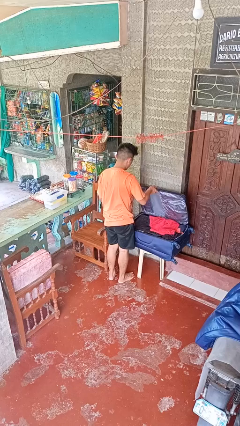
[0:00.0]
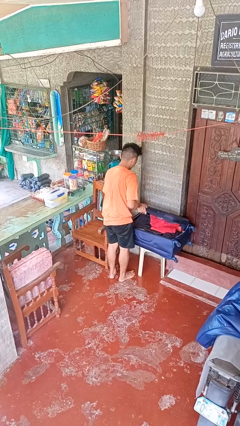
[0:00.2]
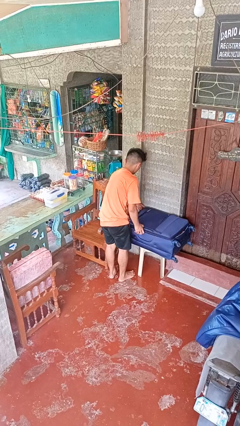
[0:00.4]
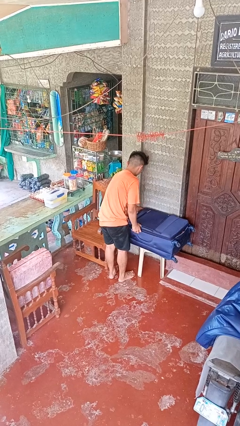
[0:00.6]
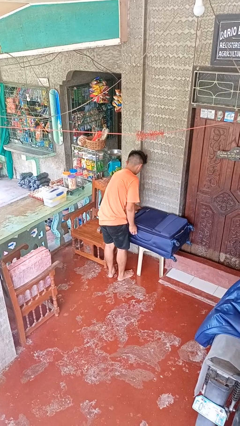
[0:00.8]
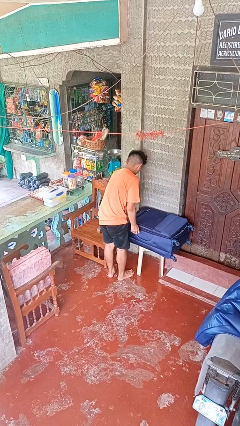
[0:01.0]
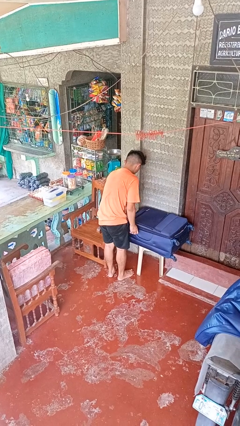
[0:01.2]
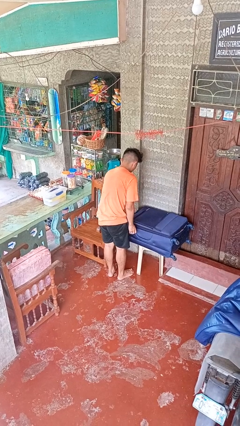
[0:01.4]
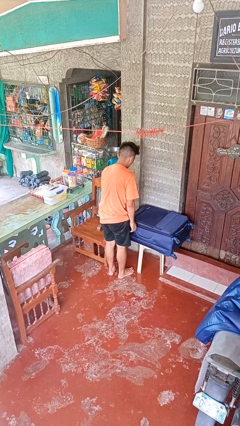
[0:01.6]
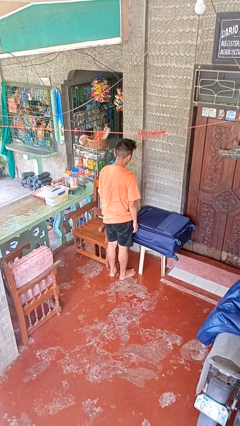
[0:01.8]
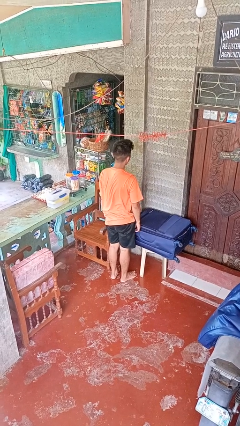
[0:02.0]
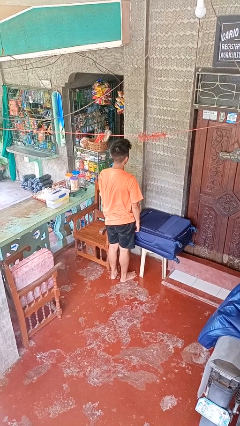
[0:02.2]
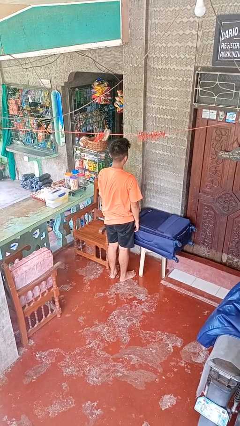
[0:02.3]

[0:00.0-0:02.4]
person closes suitcase

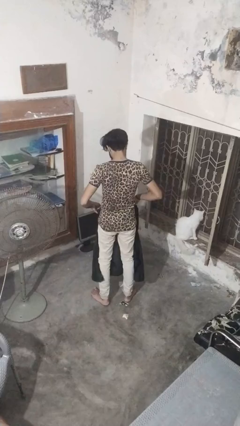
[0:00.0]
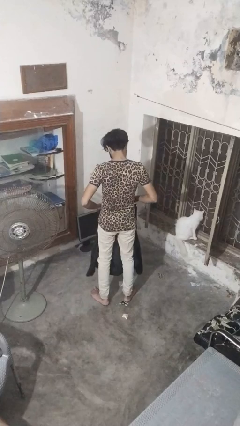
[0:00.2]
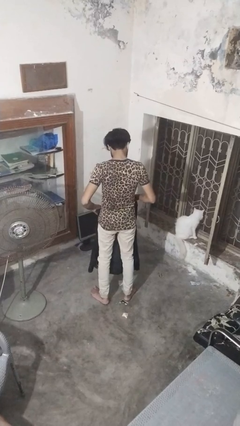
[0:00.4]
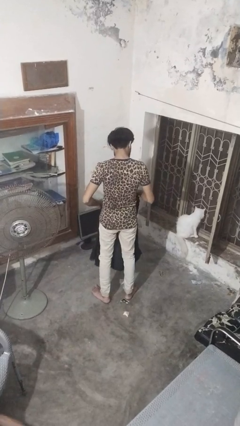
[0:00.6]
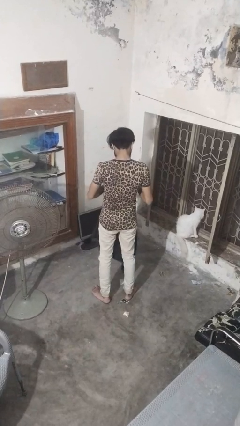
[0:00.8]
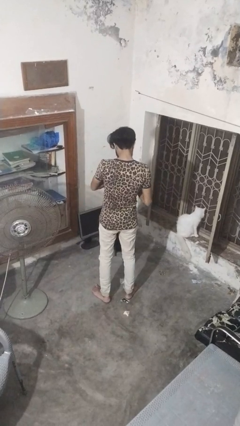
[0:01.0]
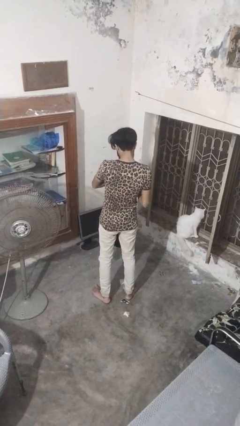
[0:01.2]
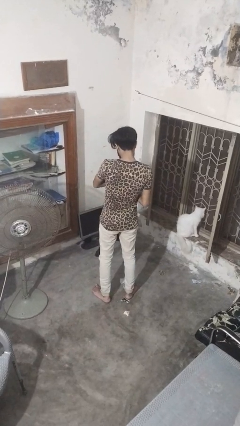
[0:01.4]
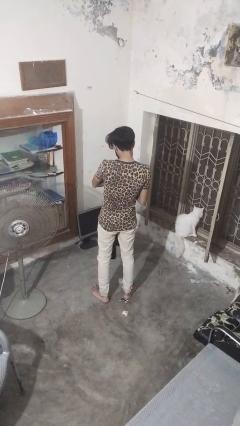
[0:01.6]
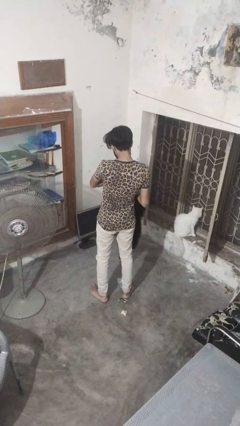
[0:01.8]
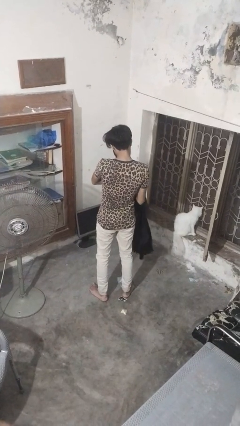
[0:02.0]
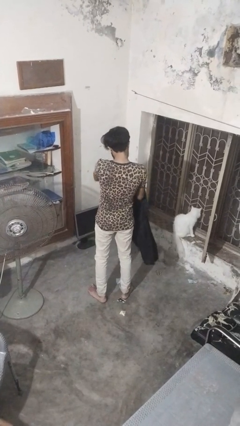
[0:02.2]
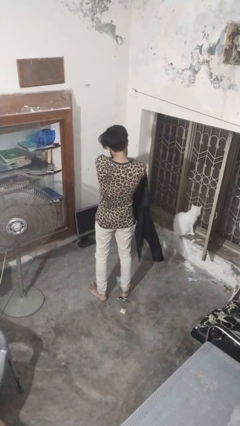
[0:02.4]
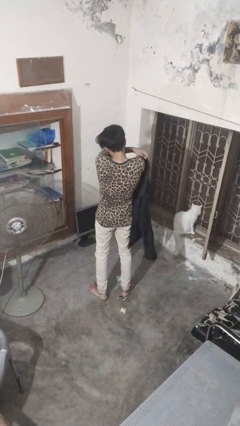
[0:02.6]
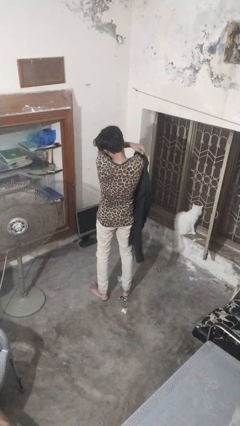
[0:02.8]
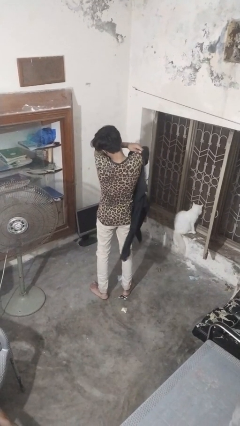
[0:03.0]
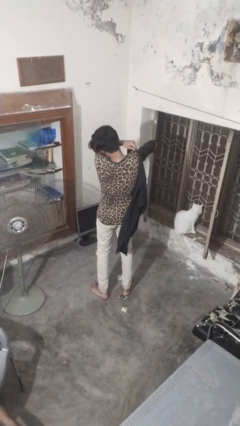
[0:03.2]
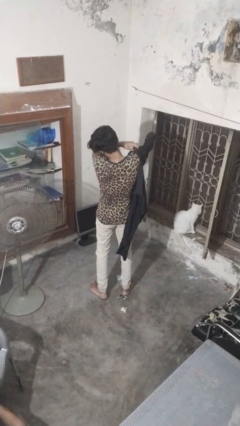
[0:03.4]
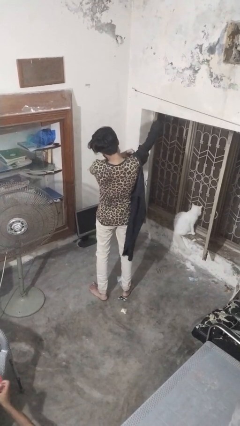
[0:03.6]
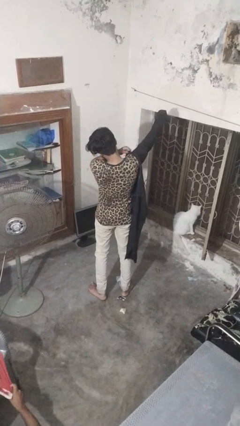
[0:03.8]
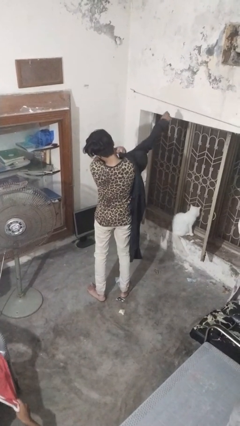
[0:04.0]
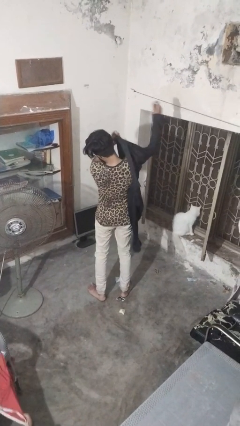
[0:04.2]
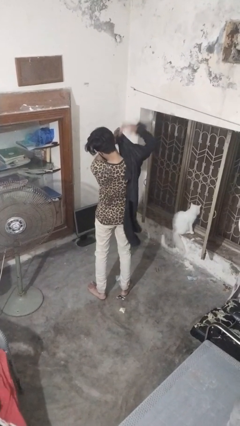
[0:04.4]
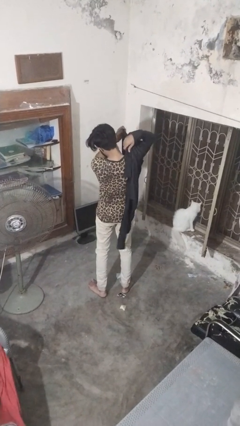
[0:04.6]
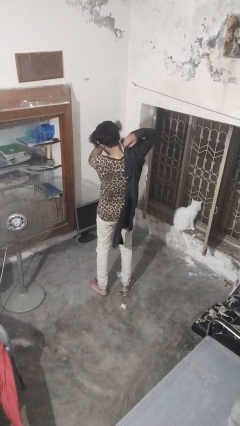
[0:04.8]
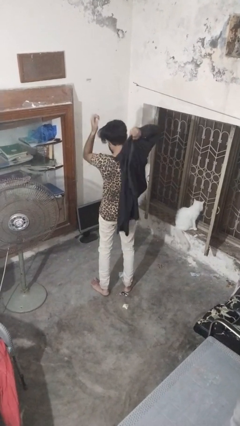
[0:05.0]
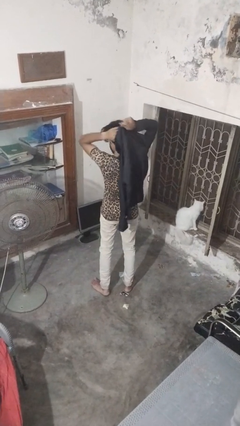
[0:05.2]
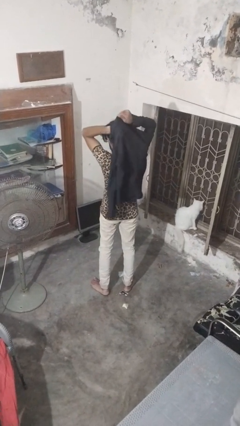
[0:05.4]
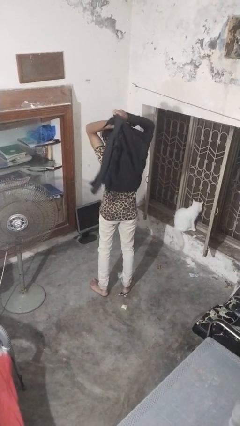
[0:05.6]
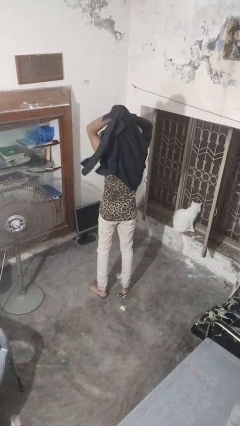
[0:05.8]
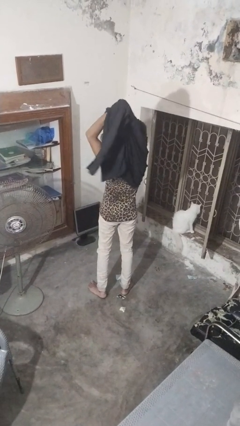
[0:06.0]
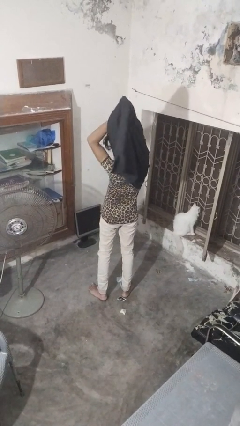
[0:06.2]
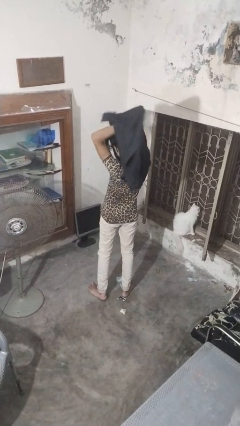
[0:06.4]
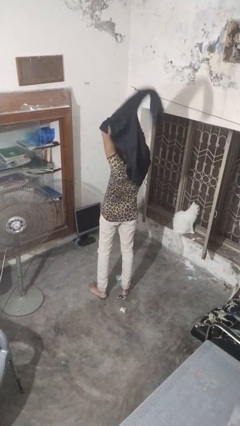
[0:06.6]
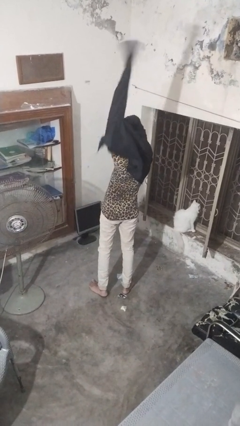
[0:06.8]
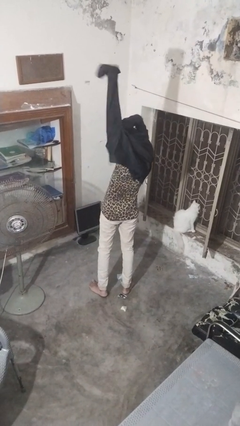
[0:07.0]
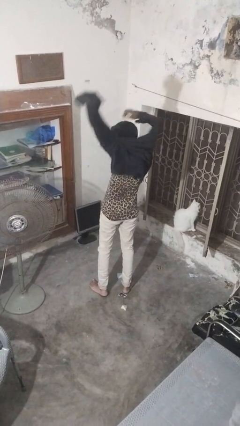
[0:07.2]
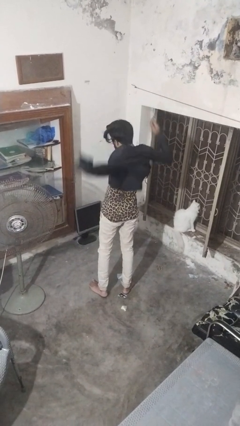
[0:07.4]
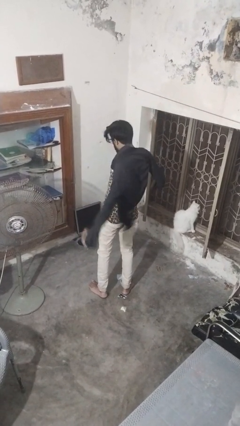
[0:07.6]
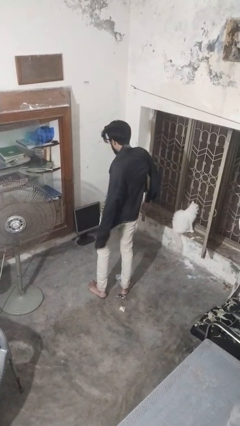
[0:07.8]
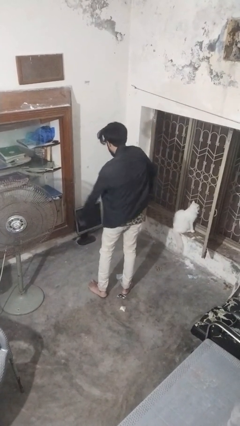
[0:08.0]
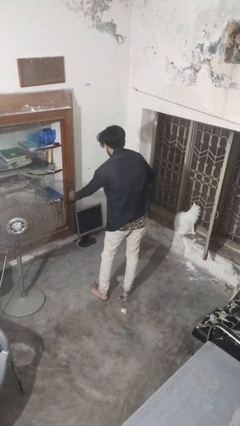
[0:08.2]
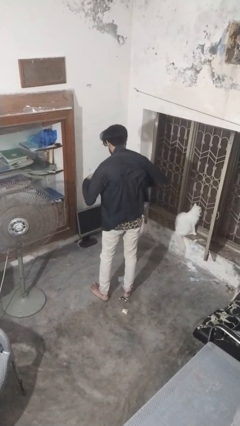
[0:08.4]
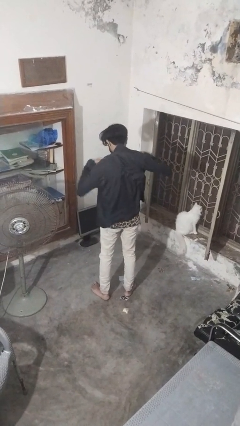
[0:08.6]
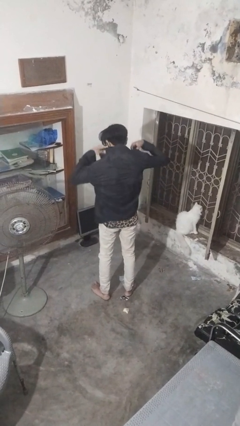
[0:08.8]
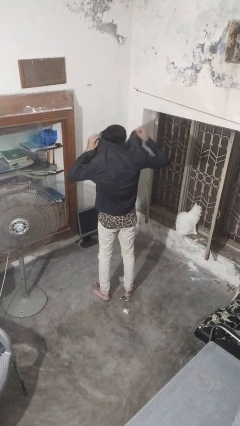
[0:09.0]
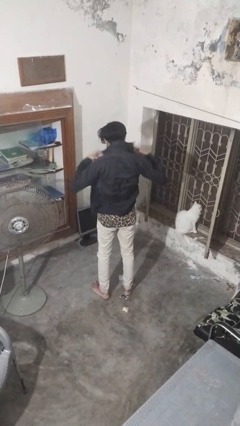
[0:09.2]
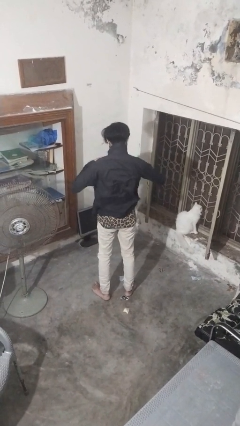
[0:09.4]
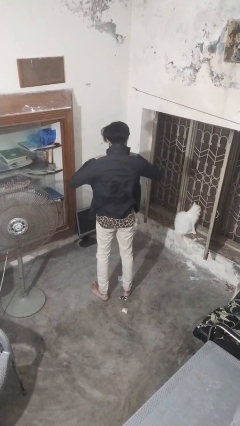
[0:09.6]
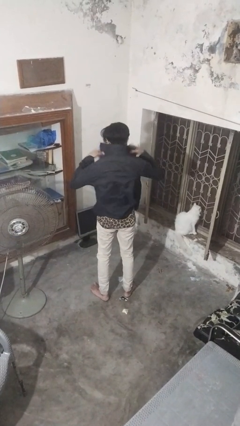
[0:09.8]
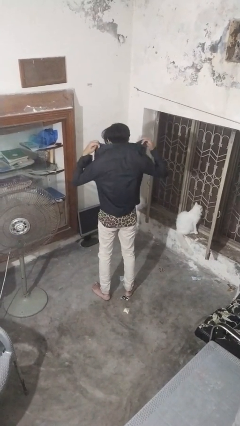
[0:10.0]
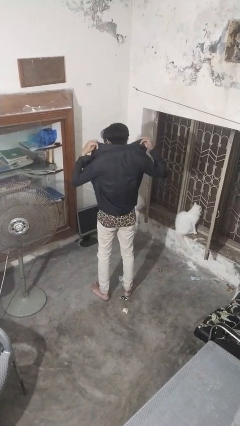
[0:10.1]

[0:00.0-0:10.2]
person puts on shirt

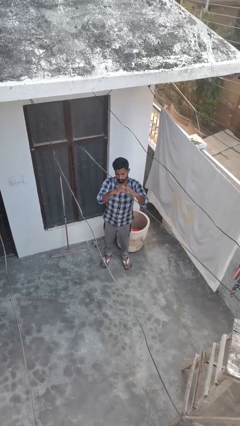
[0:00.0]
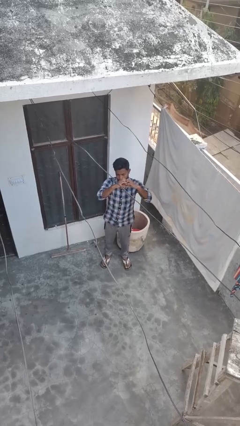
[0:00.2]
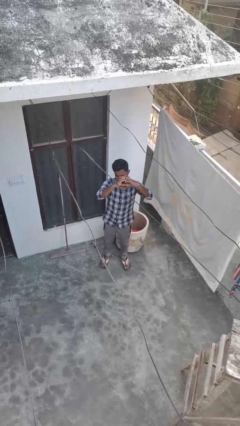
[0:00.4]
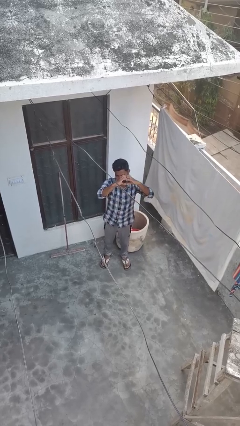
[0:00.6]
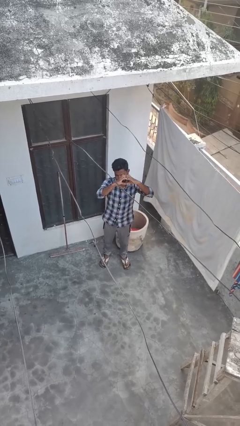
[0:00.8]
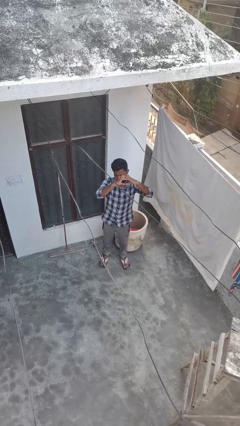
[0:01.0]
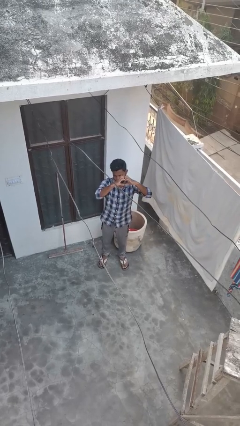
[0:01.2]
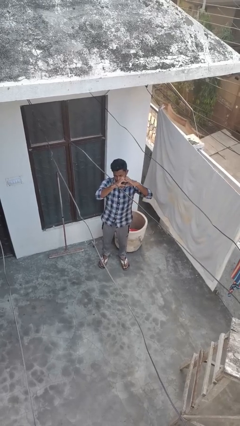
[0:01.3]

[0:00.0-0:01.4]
person gestures heart

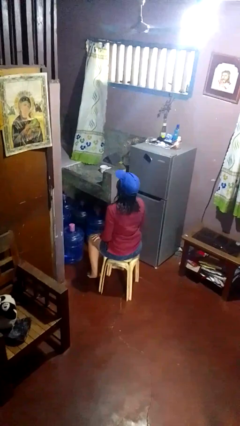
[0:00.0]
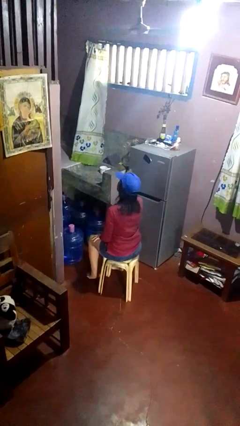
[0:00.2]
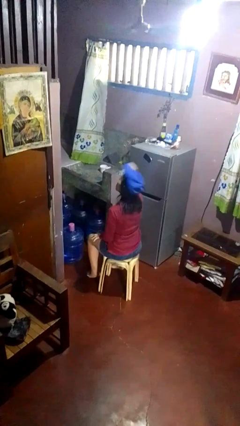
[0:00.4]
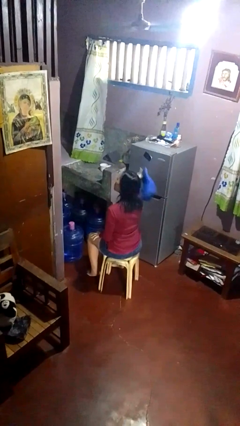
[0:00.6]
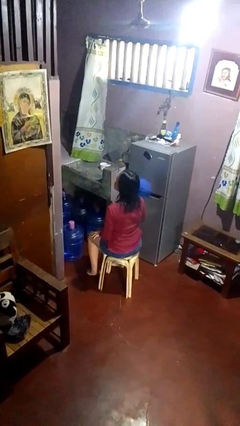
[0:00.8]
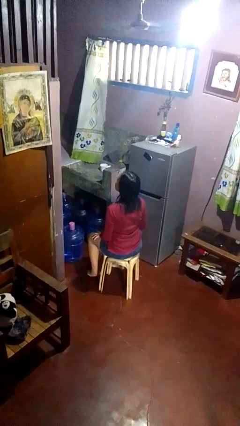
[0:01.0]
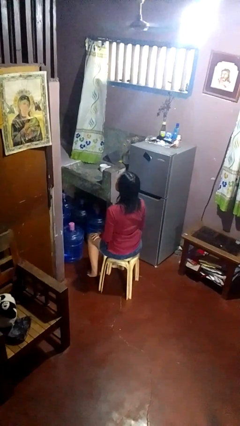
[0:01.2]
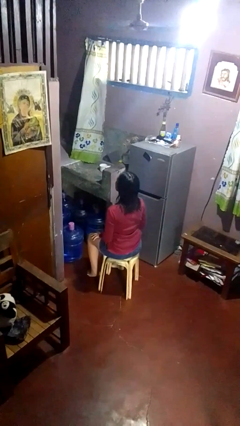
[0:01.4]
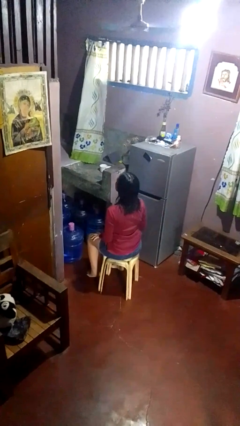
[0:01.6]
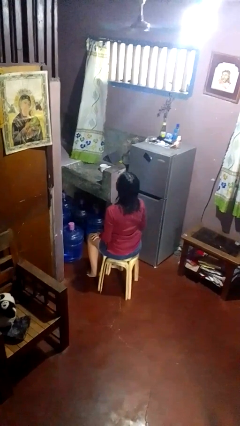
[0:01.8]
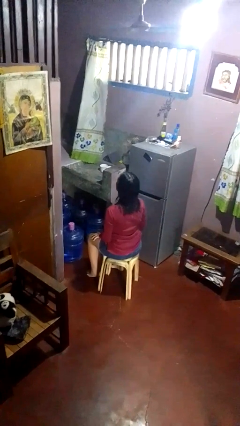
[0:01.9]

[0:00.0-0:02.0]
person takes off hat

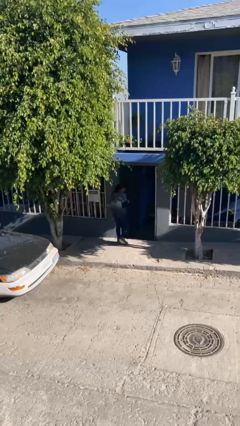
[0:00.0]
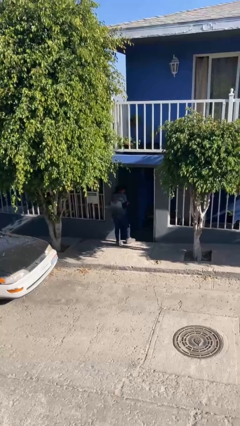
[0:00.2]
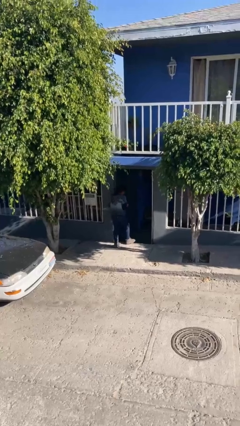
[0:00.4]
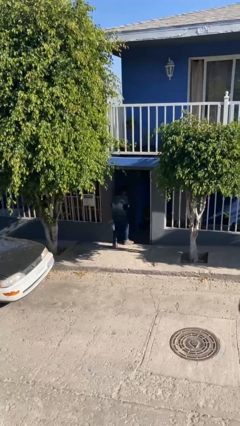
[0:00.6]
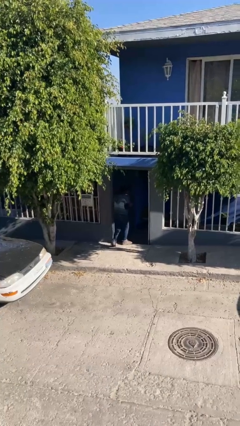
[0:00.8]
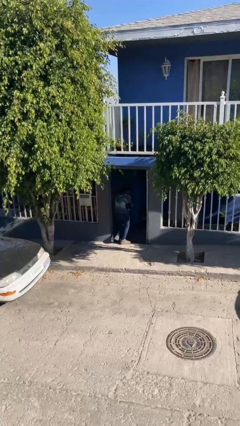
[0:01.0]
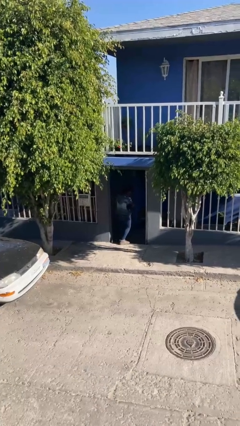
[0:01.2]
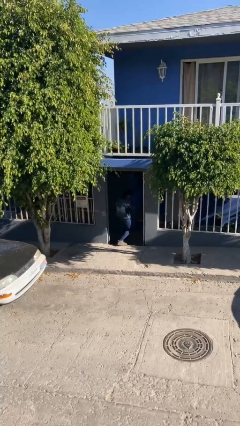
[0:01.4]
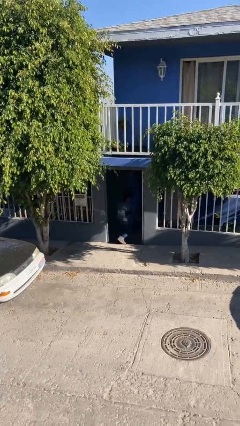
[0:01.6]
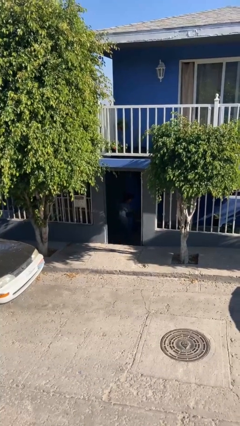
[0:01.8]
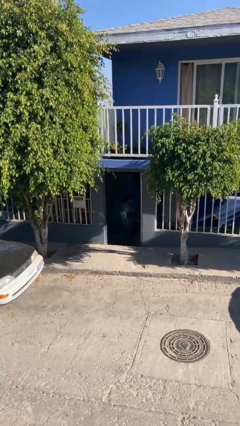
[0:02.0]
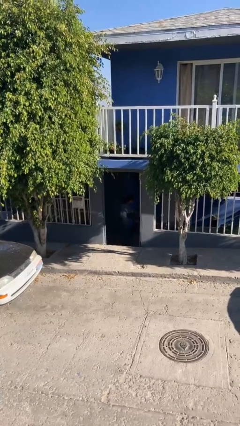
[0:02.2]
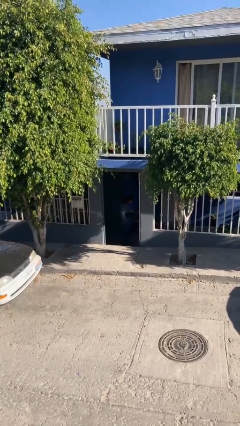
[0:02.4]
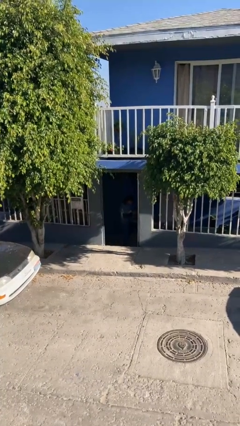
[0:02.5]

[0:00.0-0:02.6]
person exits scene through structure
